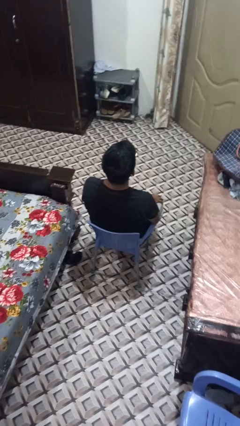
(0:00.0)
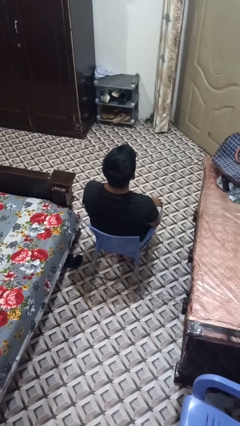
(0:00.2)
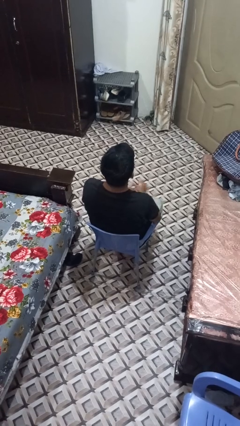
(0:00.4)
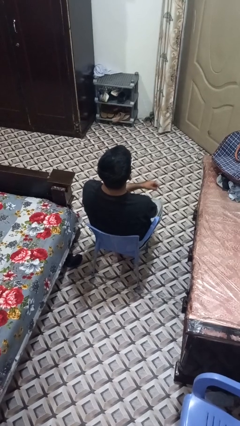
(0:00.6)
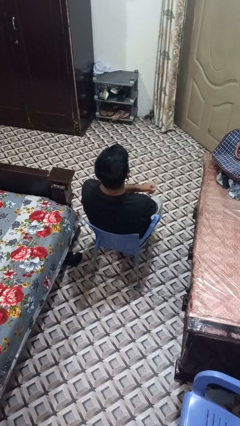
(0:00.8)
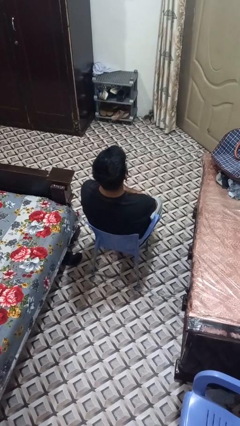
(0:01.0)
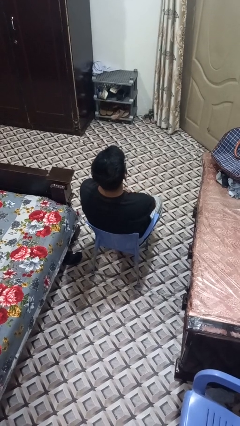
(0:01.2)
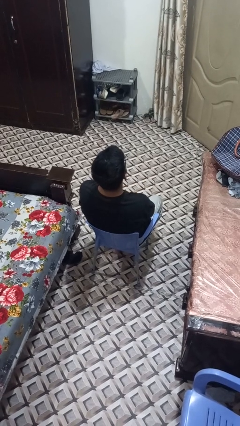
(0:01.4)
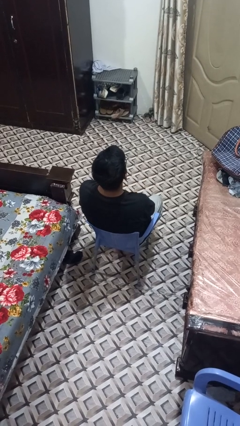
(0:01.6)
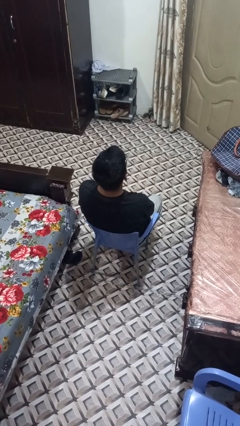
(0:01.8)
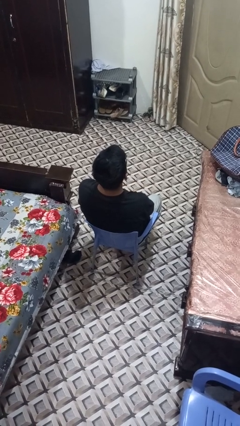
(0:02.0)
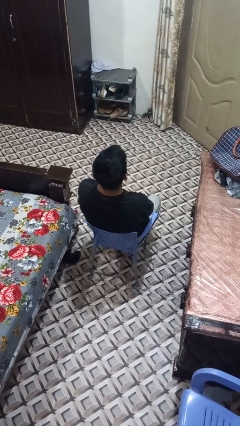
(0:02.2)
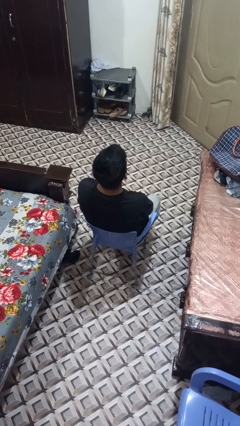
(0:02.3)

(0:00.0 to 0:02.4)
person crosses arms

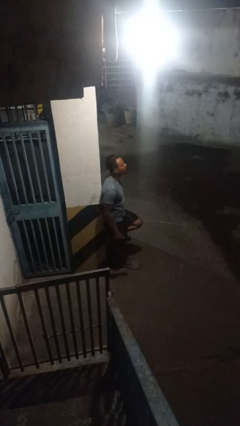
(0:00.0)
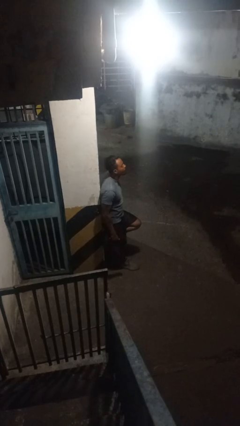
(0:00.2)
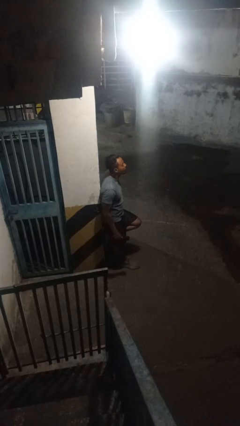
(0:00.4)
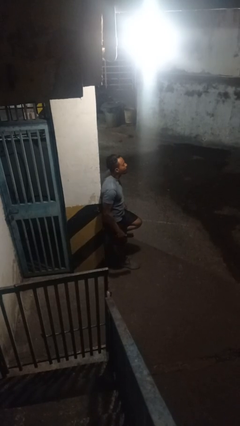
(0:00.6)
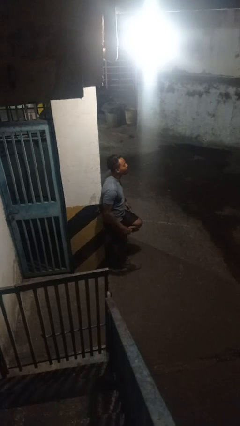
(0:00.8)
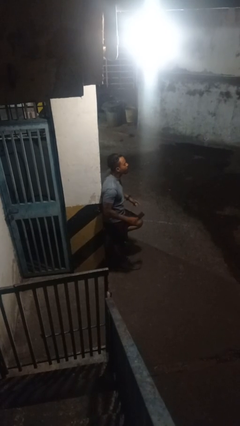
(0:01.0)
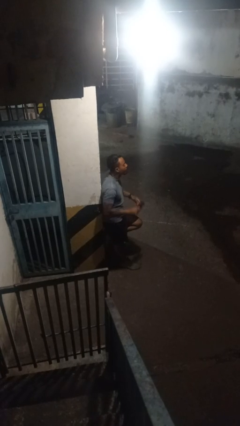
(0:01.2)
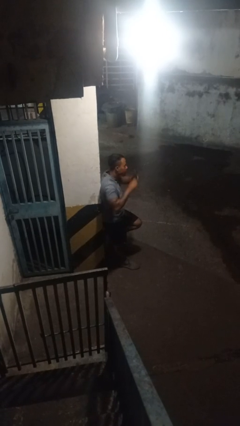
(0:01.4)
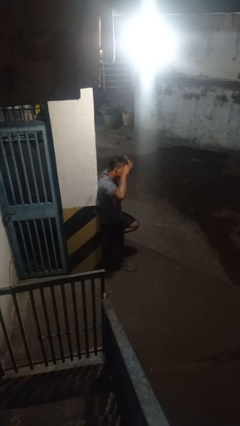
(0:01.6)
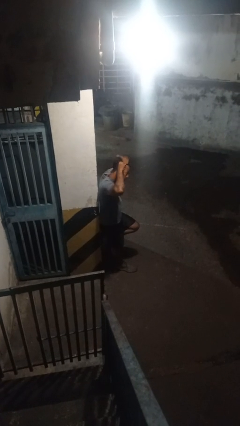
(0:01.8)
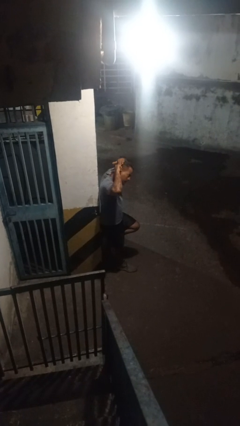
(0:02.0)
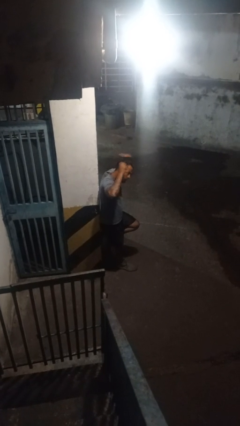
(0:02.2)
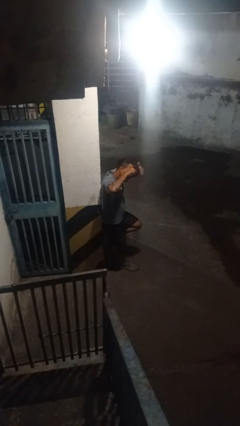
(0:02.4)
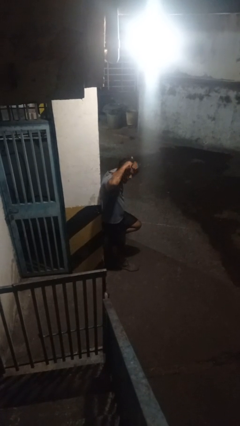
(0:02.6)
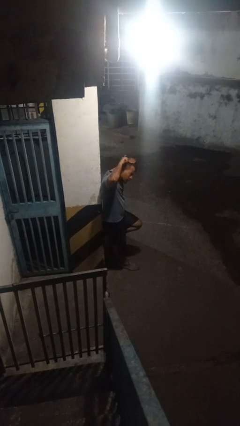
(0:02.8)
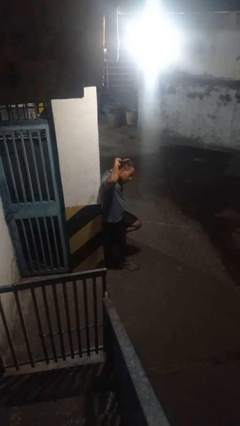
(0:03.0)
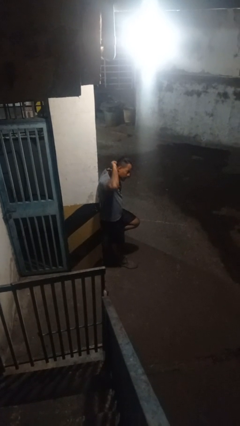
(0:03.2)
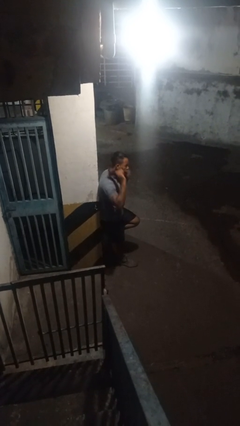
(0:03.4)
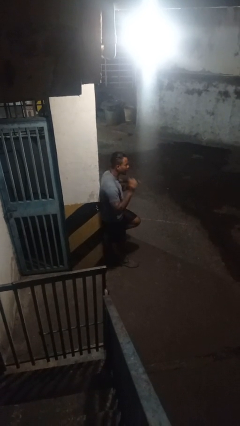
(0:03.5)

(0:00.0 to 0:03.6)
person brushes hair

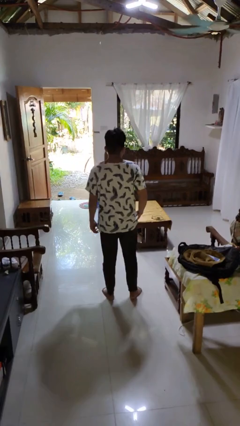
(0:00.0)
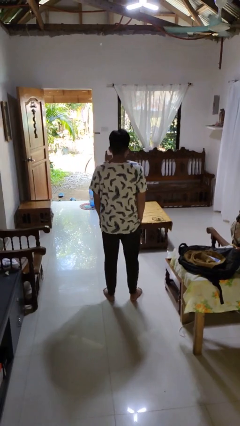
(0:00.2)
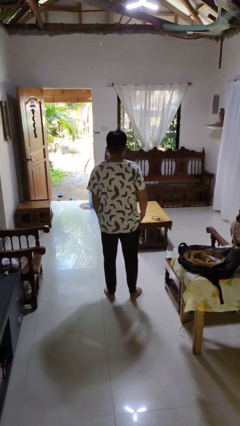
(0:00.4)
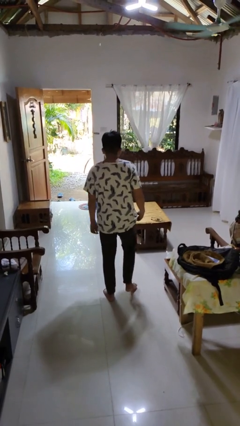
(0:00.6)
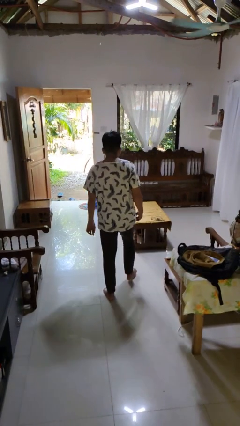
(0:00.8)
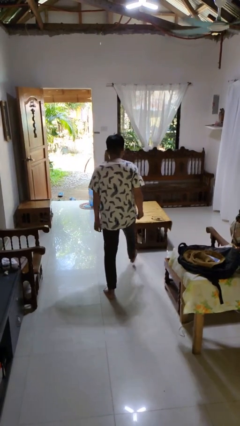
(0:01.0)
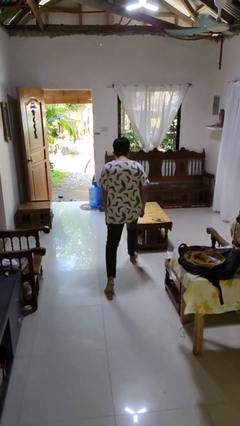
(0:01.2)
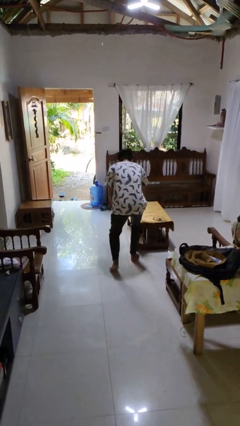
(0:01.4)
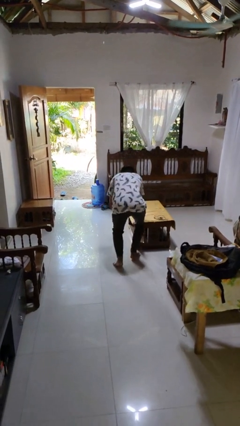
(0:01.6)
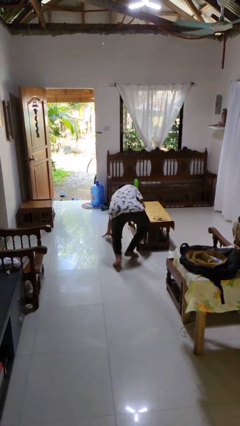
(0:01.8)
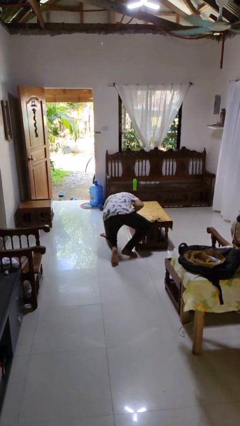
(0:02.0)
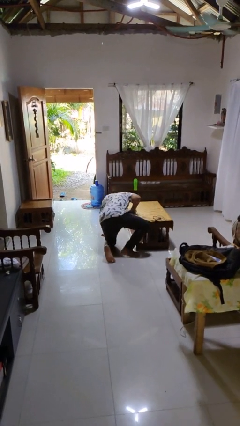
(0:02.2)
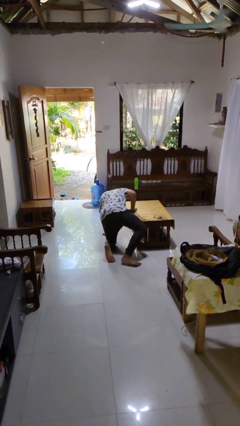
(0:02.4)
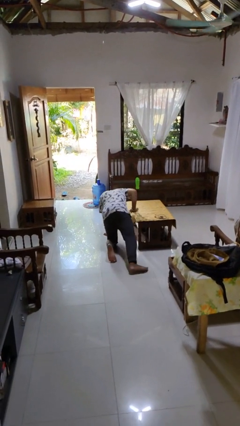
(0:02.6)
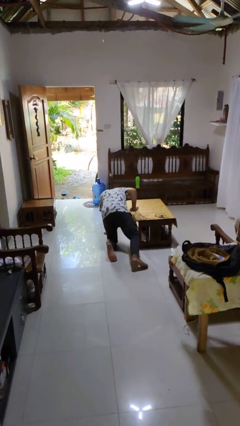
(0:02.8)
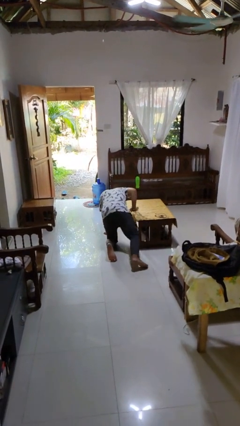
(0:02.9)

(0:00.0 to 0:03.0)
person trips on object on floor

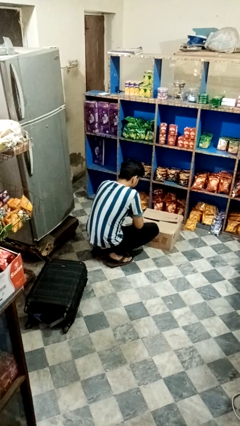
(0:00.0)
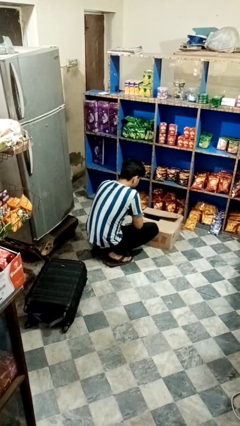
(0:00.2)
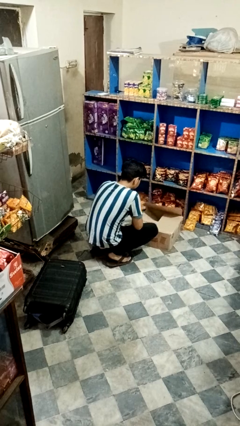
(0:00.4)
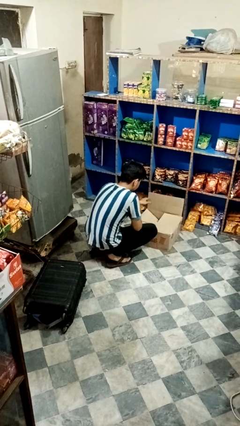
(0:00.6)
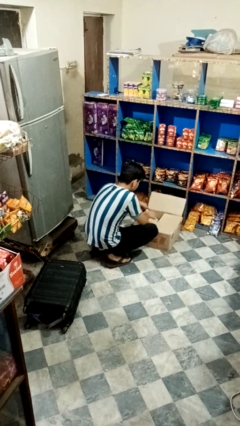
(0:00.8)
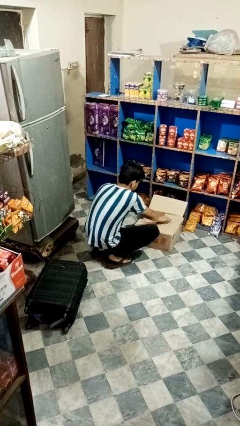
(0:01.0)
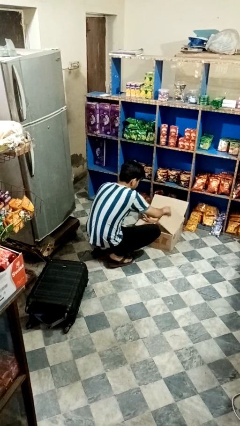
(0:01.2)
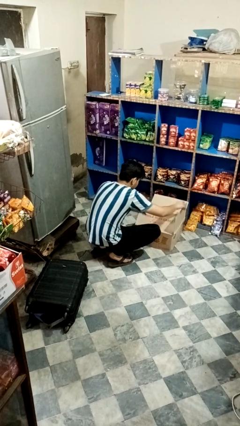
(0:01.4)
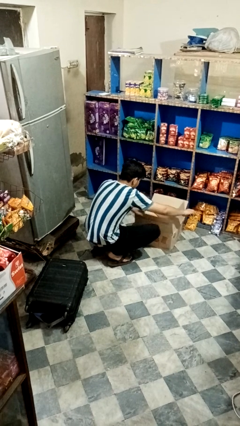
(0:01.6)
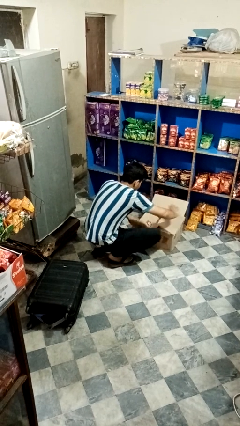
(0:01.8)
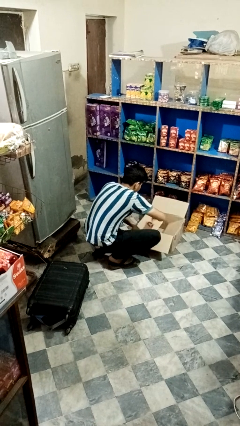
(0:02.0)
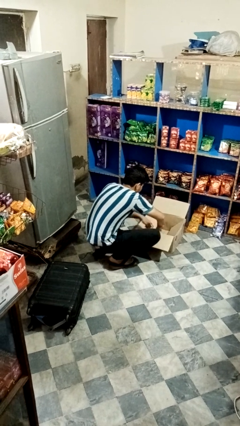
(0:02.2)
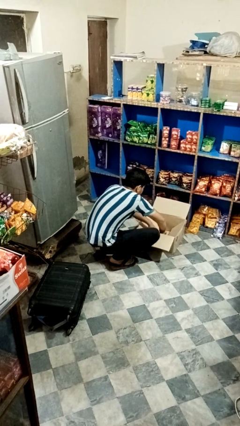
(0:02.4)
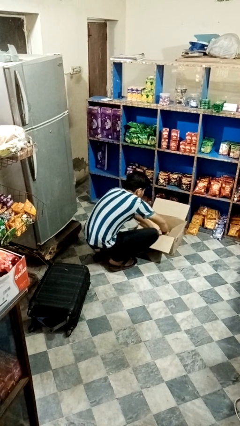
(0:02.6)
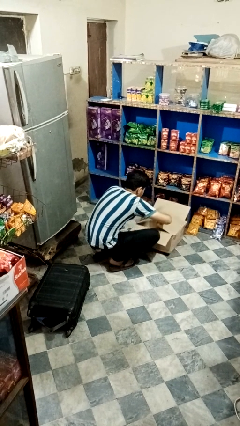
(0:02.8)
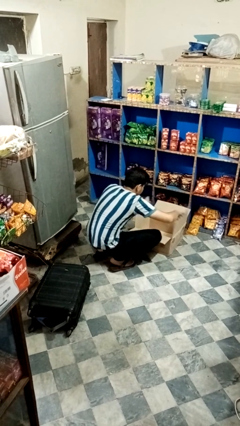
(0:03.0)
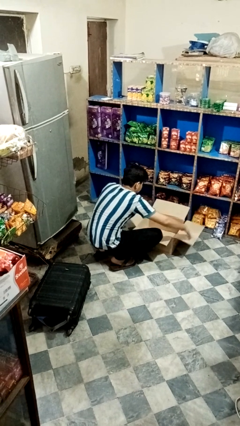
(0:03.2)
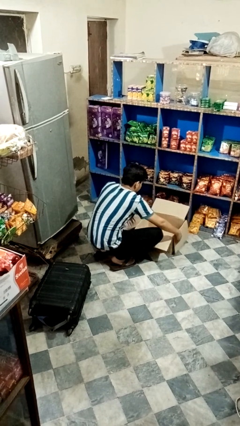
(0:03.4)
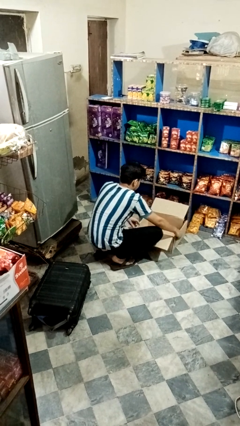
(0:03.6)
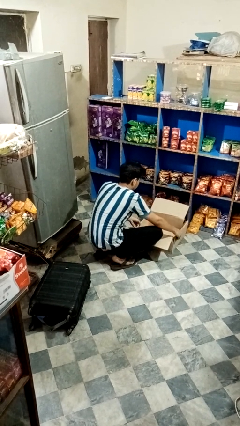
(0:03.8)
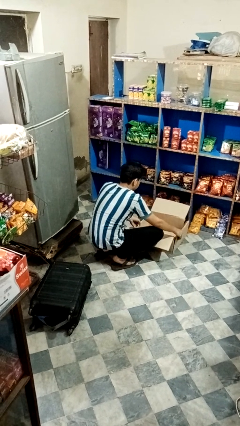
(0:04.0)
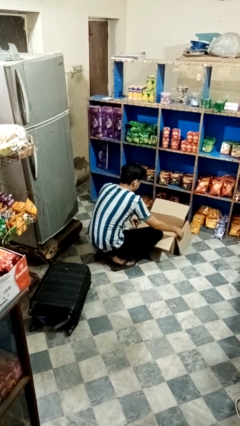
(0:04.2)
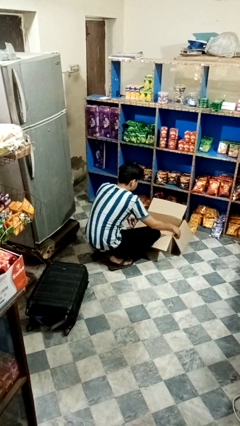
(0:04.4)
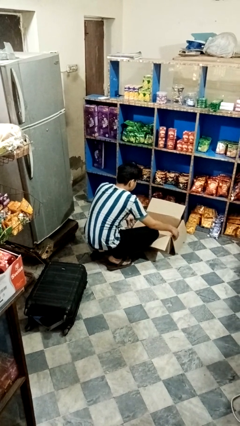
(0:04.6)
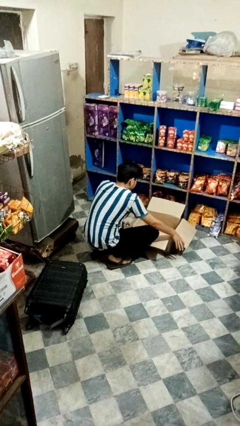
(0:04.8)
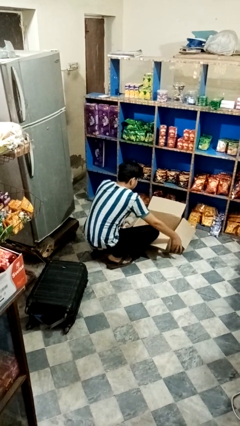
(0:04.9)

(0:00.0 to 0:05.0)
person opens box

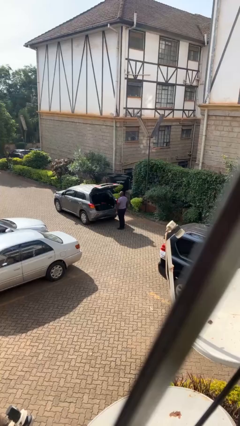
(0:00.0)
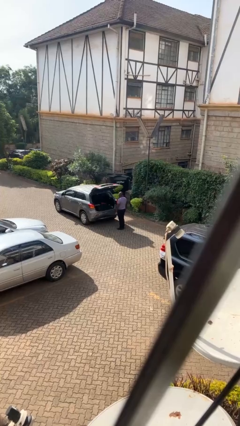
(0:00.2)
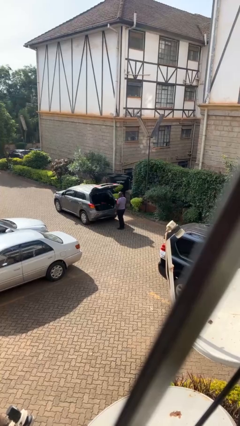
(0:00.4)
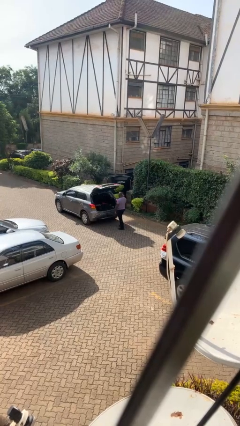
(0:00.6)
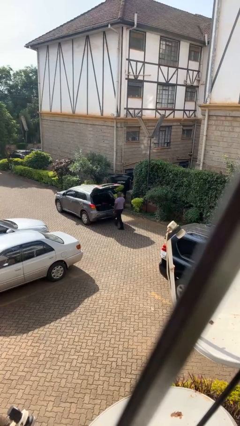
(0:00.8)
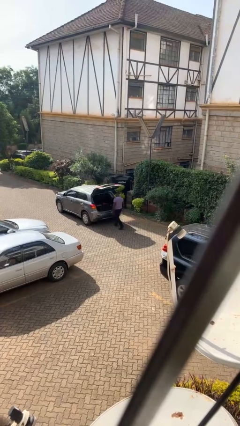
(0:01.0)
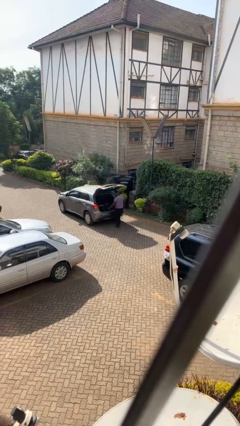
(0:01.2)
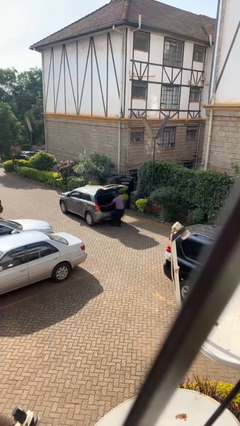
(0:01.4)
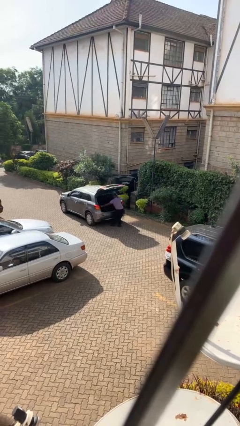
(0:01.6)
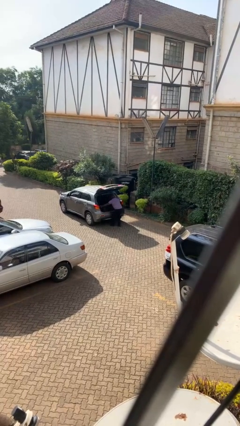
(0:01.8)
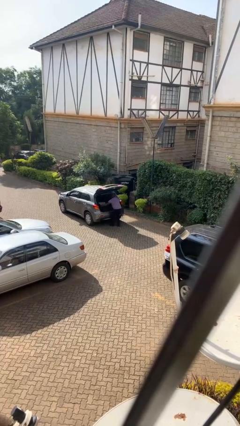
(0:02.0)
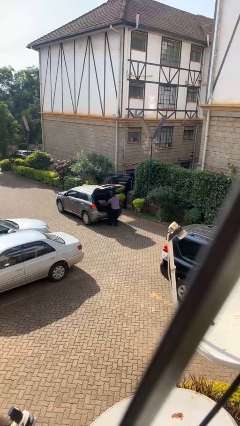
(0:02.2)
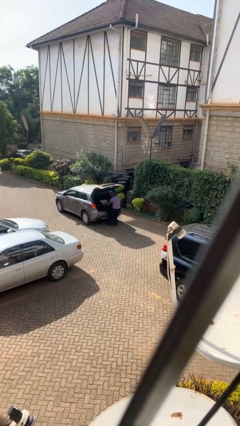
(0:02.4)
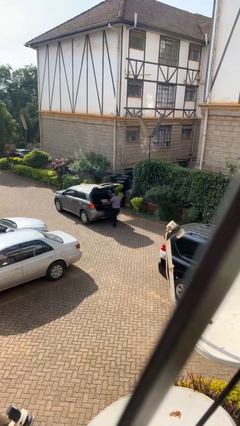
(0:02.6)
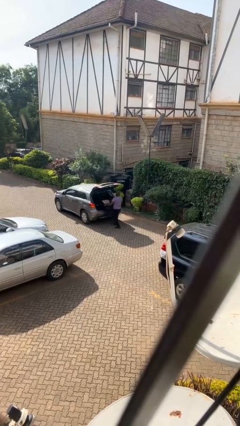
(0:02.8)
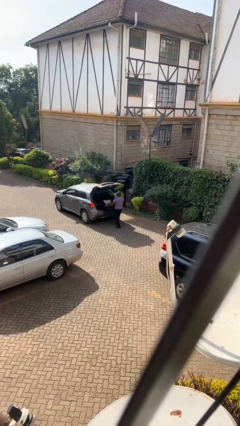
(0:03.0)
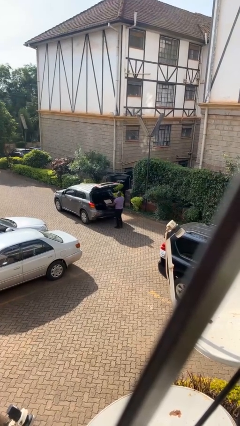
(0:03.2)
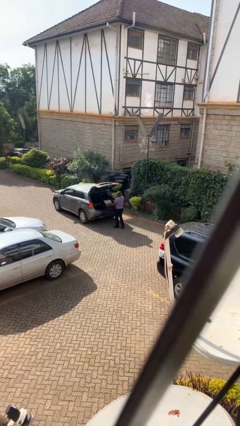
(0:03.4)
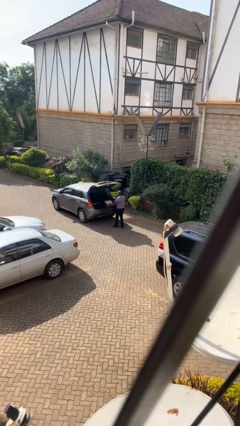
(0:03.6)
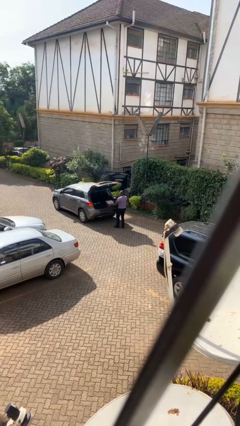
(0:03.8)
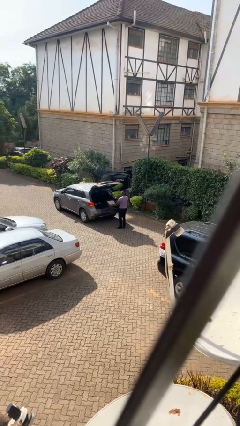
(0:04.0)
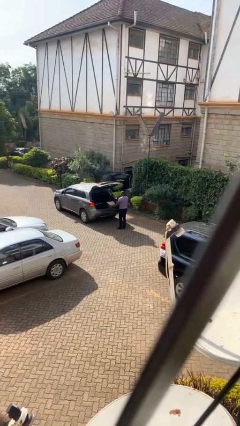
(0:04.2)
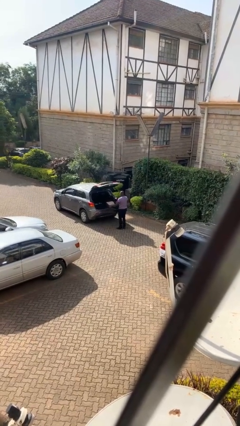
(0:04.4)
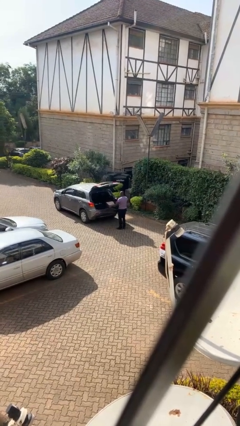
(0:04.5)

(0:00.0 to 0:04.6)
person unloads car
